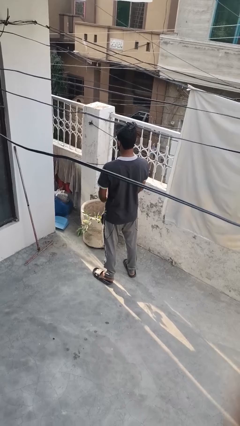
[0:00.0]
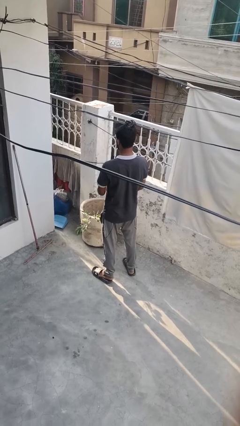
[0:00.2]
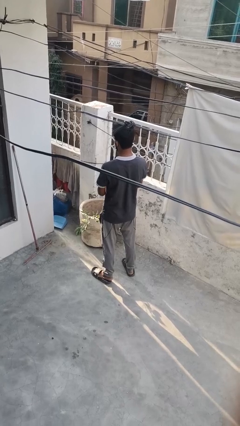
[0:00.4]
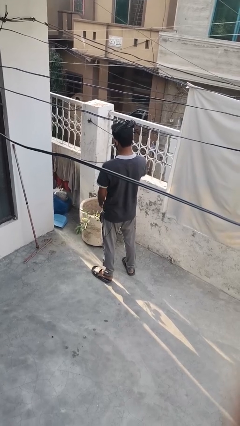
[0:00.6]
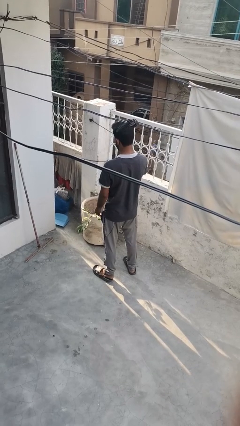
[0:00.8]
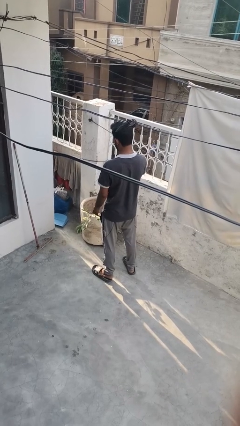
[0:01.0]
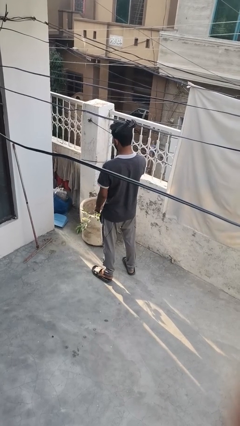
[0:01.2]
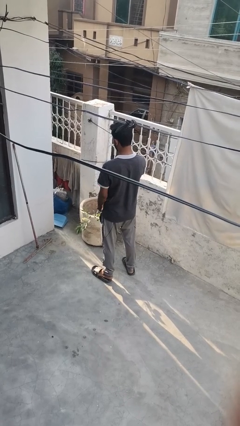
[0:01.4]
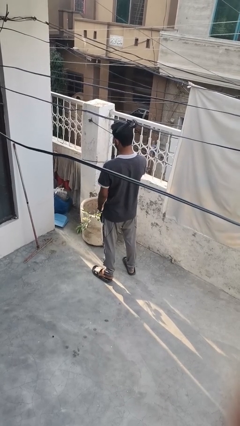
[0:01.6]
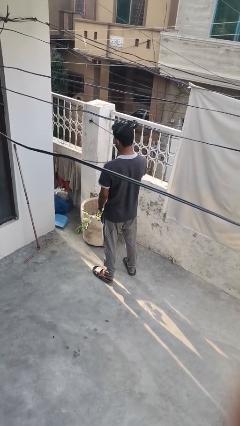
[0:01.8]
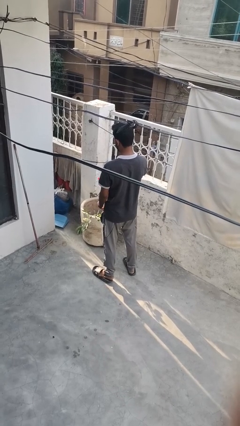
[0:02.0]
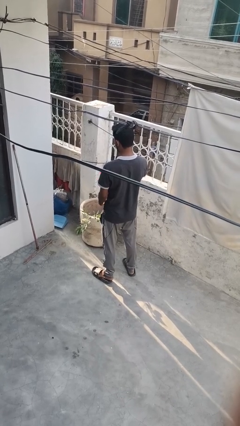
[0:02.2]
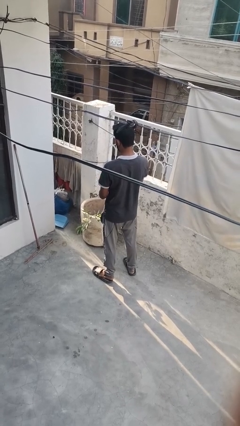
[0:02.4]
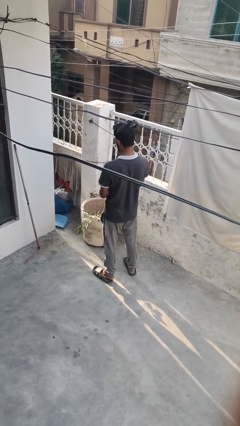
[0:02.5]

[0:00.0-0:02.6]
person waters houseplant

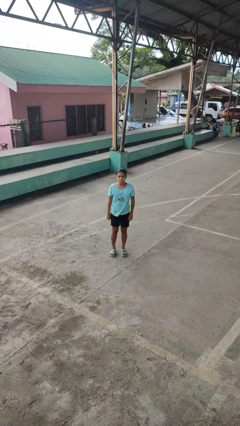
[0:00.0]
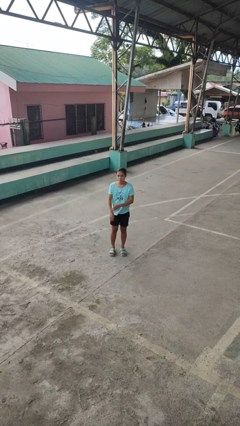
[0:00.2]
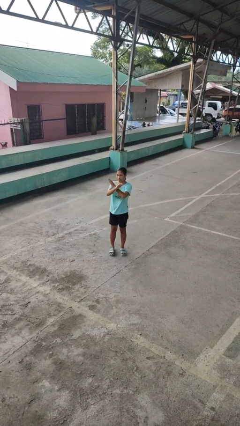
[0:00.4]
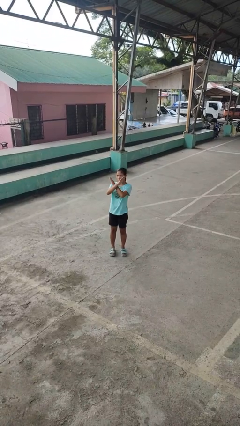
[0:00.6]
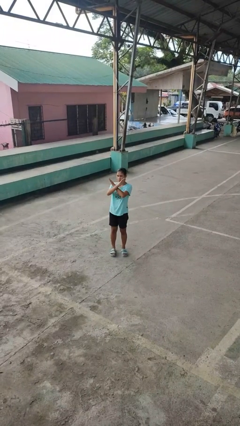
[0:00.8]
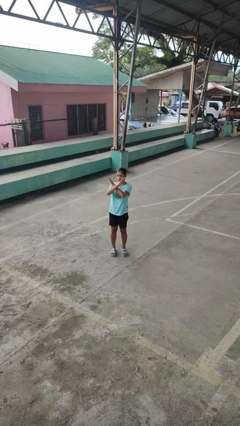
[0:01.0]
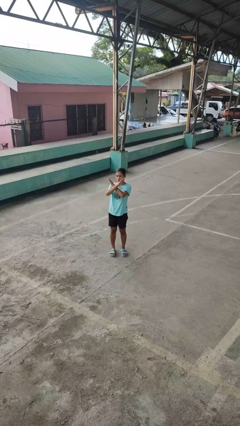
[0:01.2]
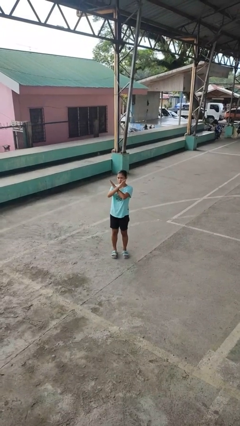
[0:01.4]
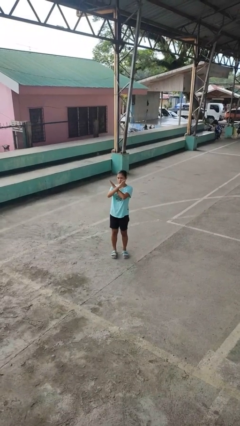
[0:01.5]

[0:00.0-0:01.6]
person gestures arms x

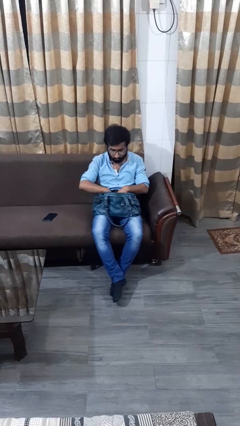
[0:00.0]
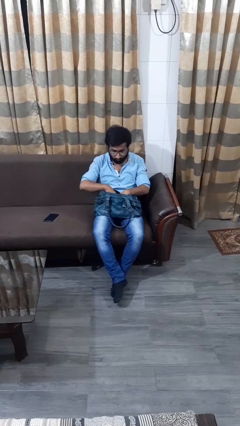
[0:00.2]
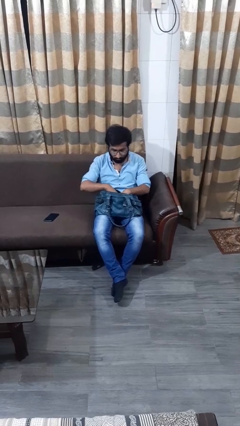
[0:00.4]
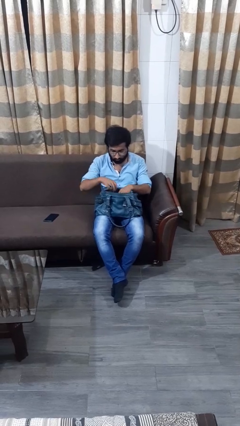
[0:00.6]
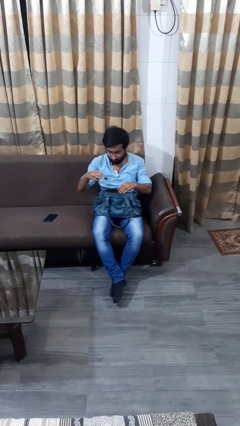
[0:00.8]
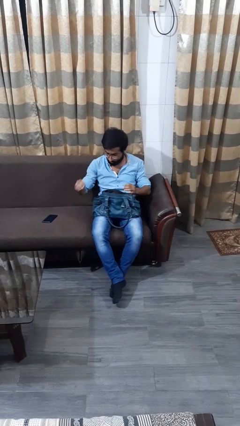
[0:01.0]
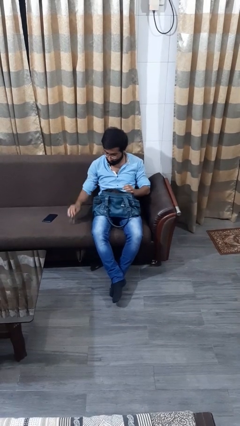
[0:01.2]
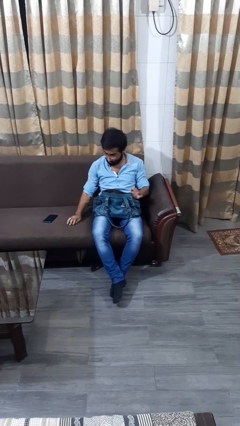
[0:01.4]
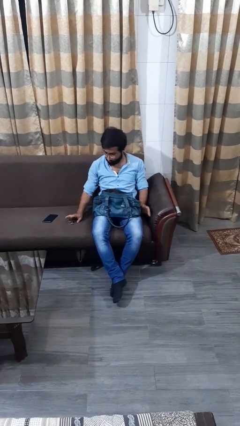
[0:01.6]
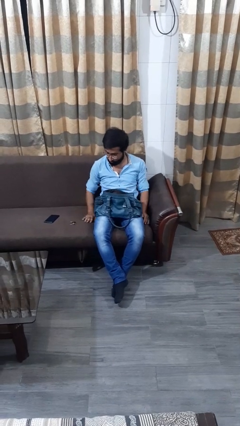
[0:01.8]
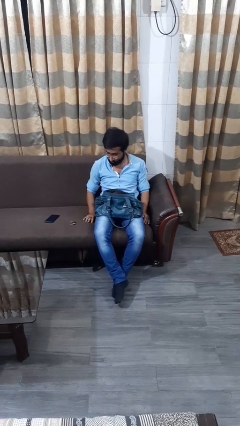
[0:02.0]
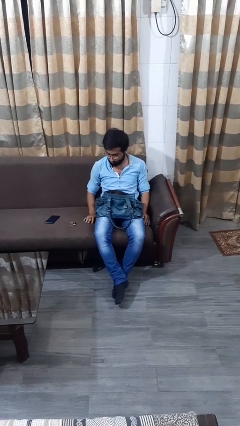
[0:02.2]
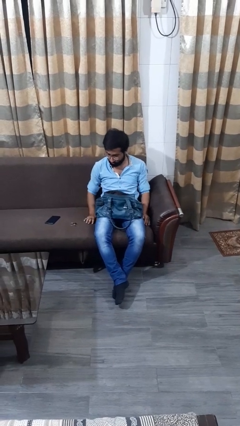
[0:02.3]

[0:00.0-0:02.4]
person takes object from purse

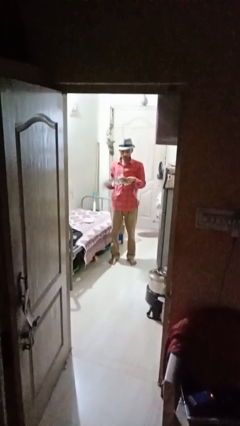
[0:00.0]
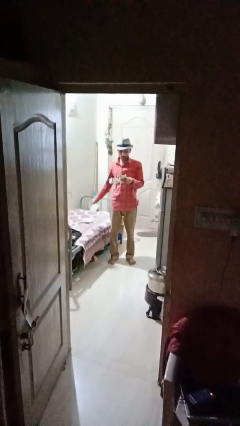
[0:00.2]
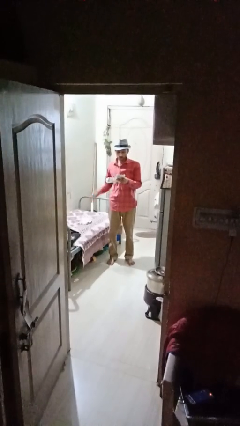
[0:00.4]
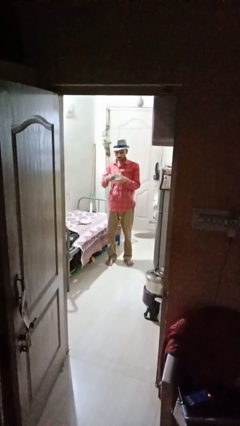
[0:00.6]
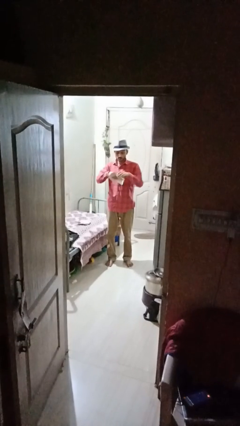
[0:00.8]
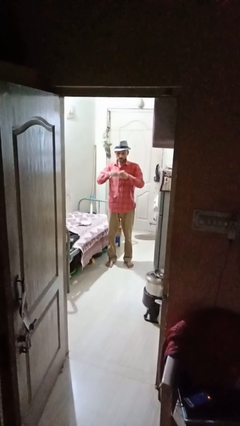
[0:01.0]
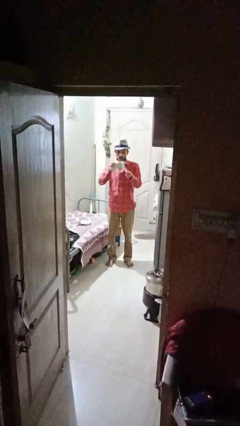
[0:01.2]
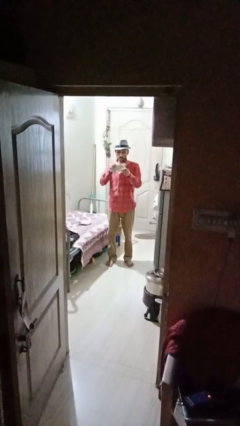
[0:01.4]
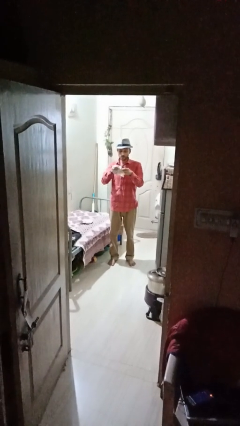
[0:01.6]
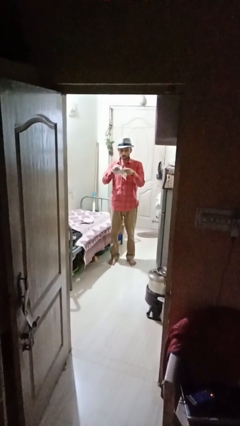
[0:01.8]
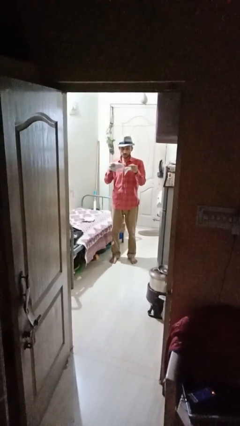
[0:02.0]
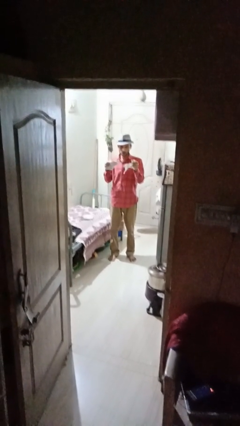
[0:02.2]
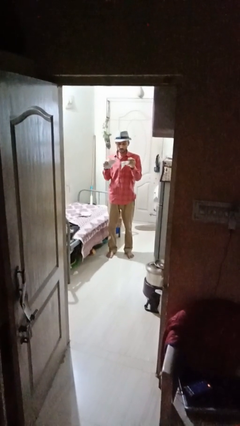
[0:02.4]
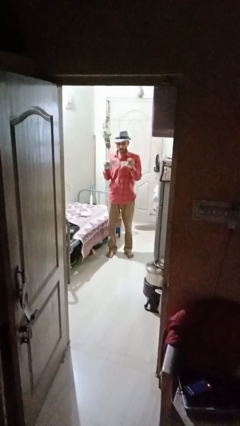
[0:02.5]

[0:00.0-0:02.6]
person tears paper

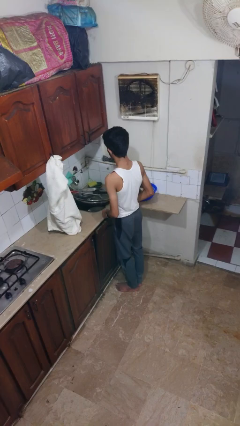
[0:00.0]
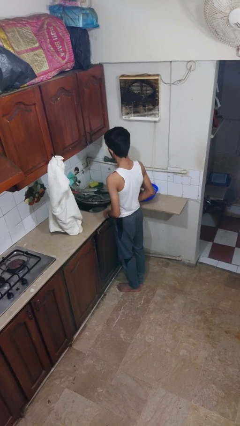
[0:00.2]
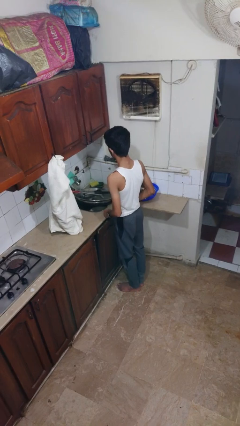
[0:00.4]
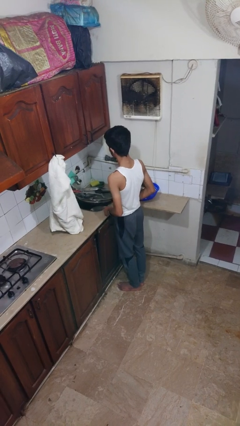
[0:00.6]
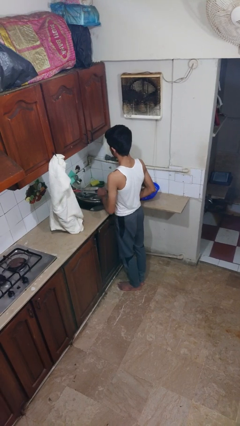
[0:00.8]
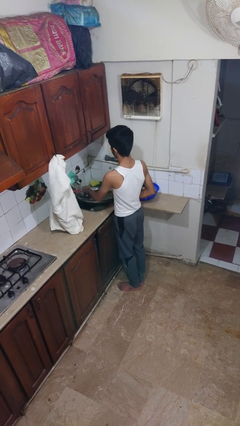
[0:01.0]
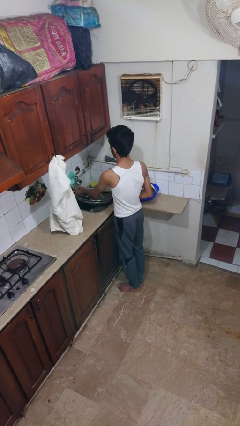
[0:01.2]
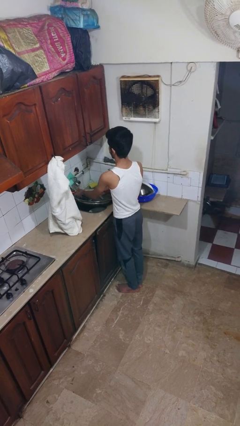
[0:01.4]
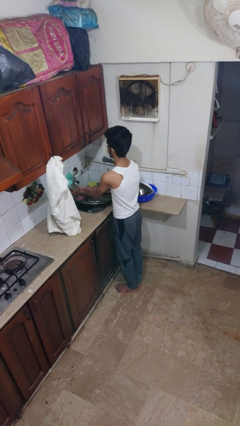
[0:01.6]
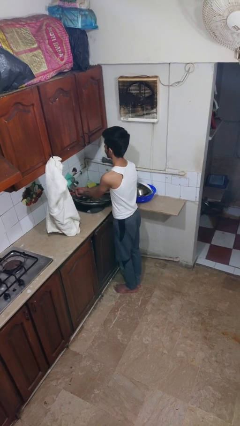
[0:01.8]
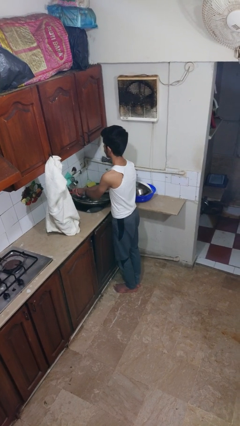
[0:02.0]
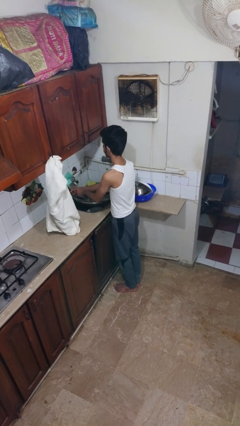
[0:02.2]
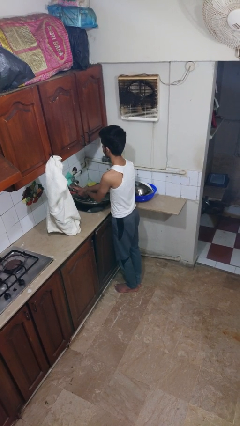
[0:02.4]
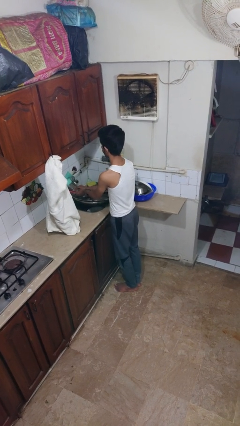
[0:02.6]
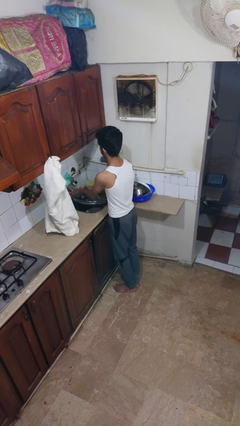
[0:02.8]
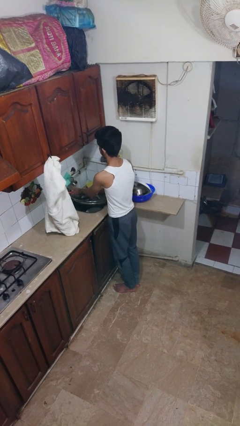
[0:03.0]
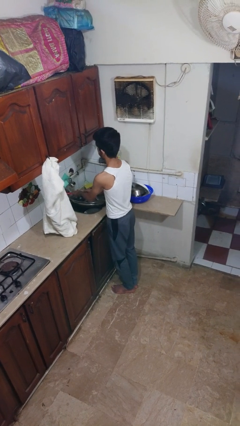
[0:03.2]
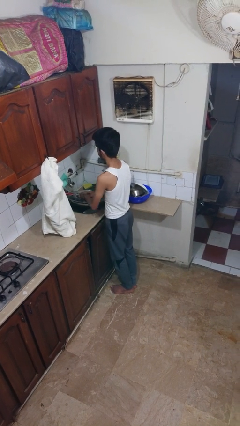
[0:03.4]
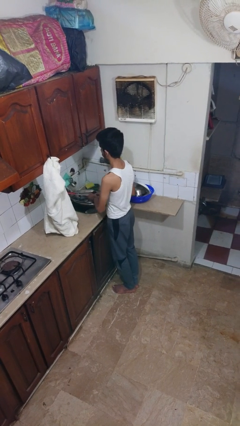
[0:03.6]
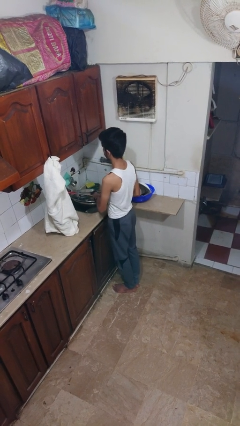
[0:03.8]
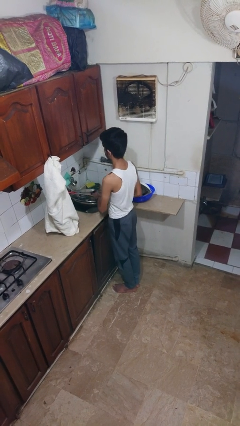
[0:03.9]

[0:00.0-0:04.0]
person washes hands

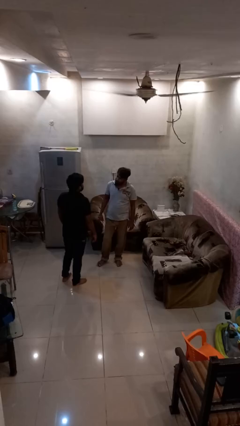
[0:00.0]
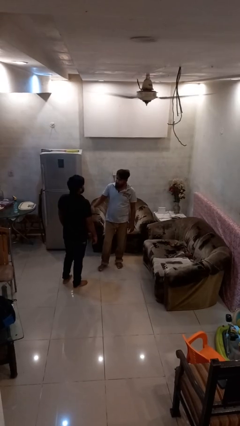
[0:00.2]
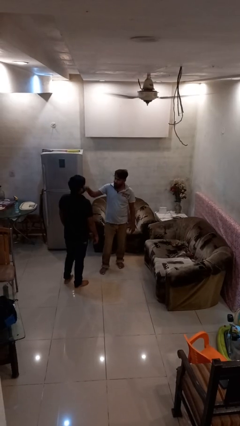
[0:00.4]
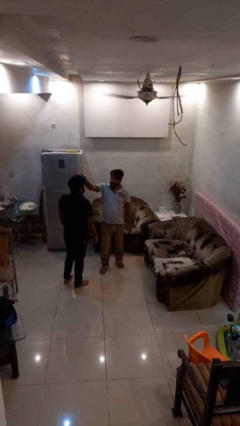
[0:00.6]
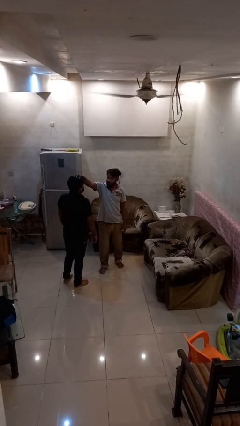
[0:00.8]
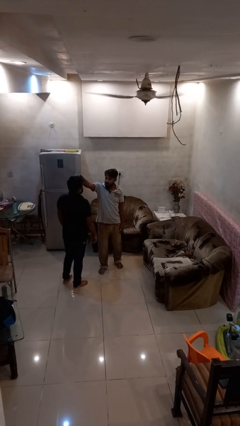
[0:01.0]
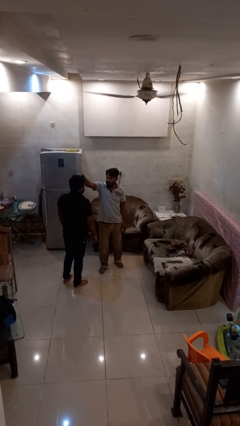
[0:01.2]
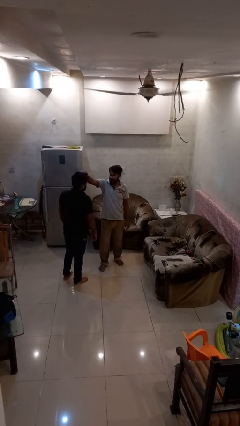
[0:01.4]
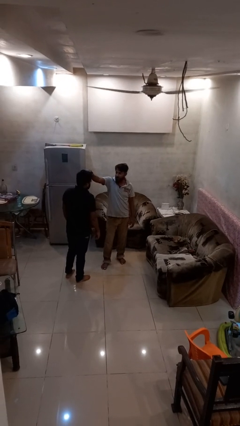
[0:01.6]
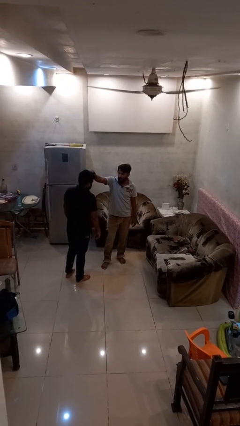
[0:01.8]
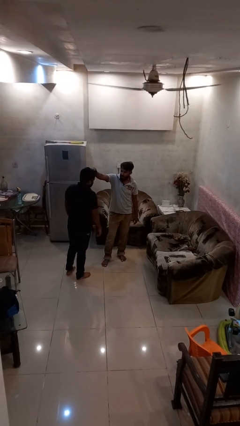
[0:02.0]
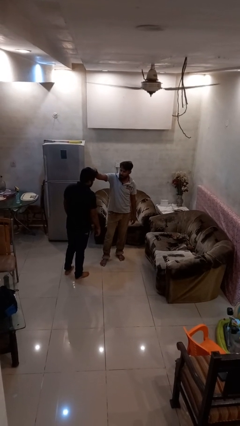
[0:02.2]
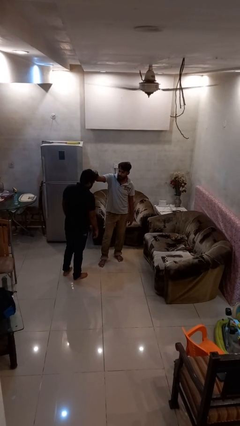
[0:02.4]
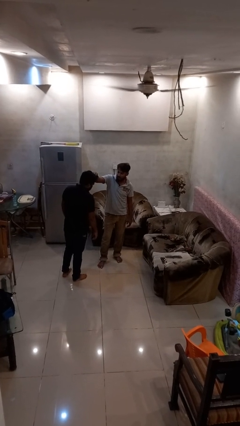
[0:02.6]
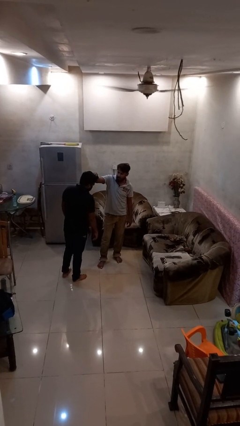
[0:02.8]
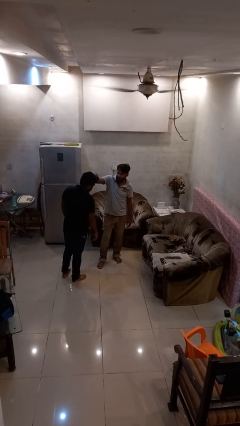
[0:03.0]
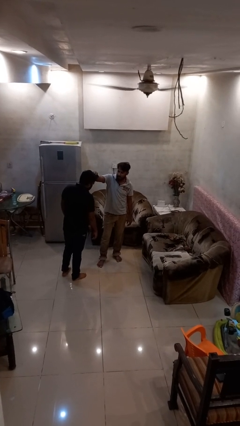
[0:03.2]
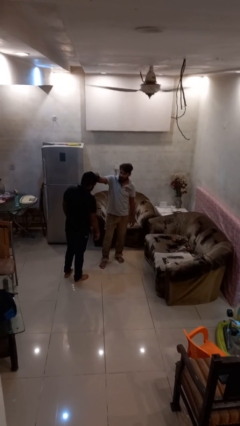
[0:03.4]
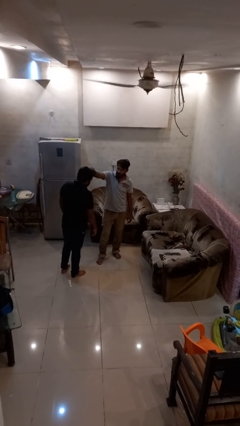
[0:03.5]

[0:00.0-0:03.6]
person grabs person by hair

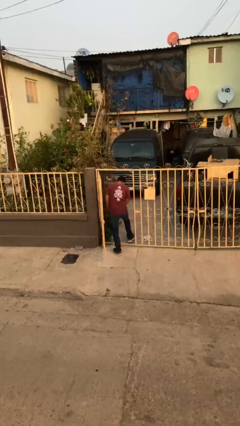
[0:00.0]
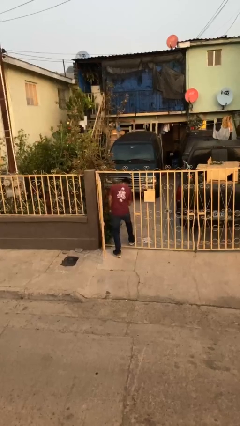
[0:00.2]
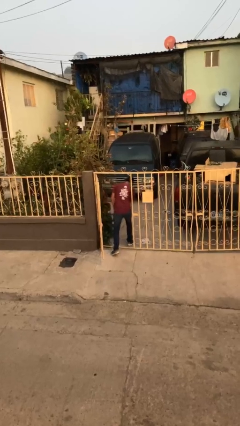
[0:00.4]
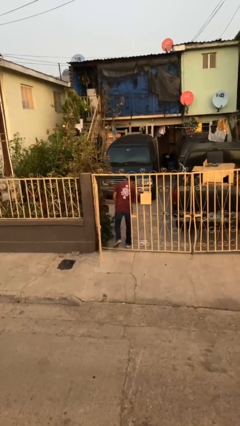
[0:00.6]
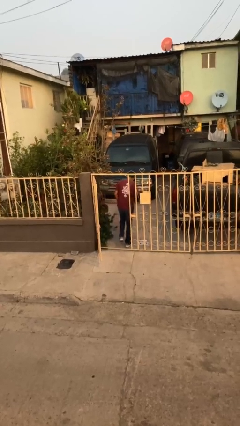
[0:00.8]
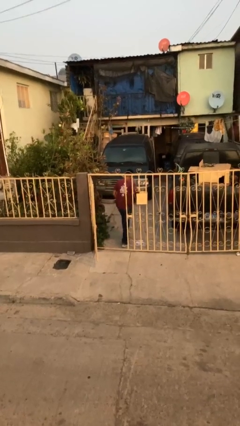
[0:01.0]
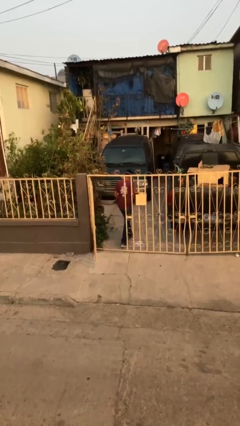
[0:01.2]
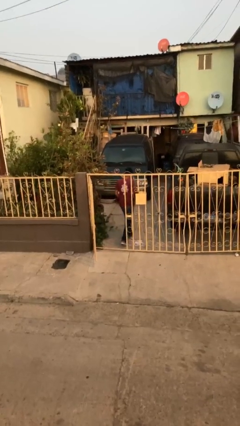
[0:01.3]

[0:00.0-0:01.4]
person exits scene through structure
